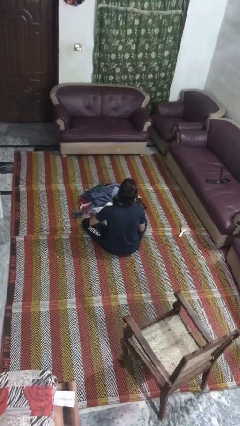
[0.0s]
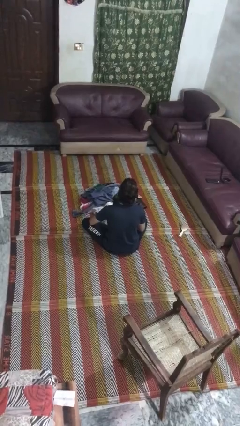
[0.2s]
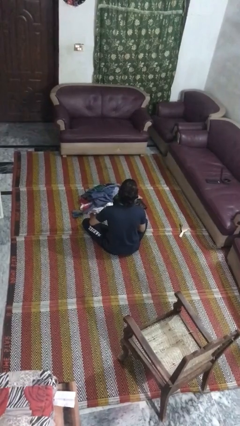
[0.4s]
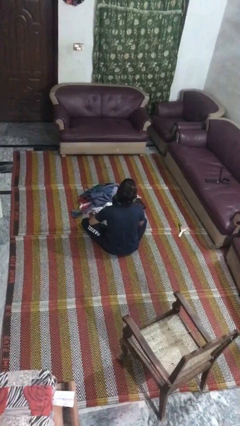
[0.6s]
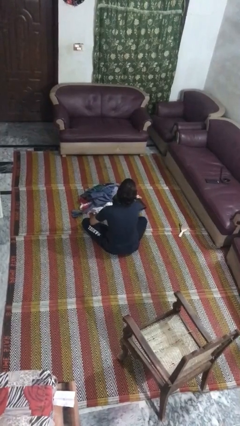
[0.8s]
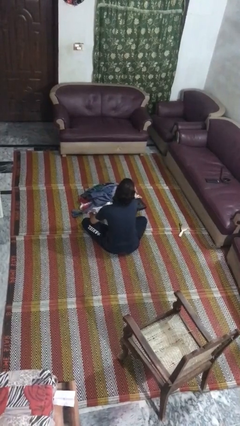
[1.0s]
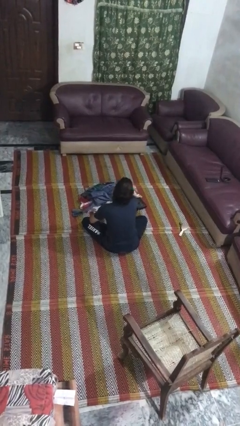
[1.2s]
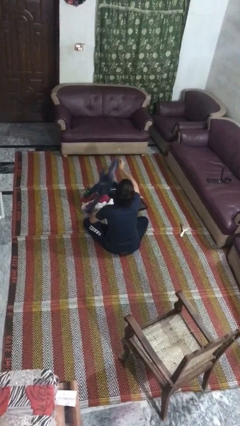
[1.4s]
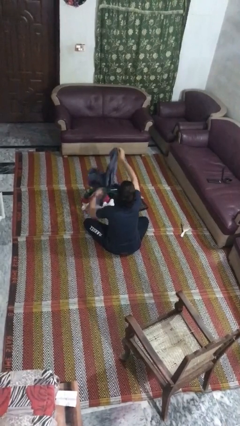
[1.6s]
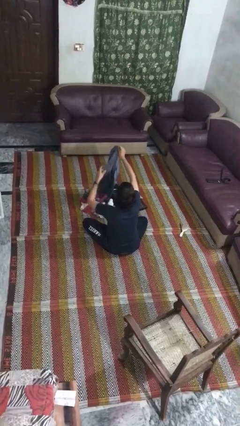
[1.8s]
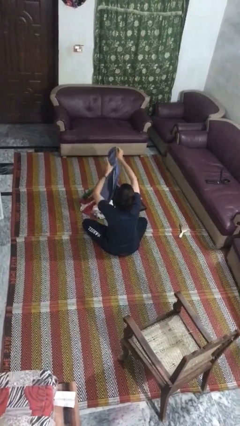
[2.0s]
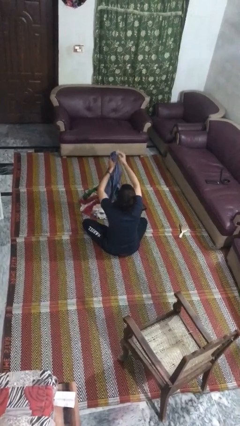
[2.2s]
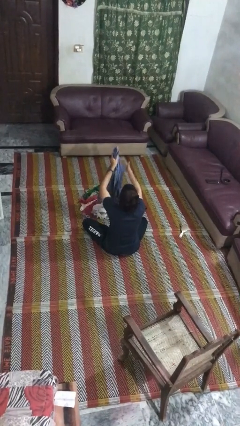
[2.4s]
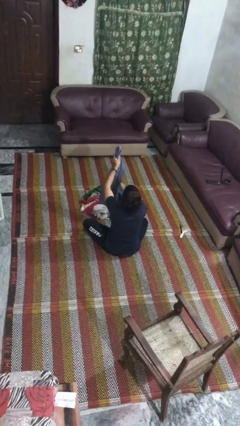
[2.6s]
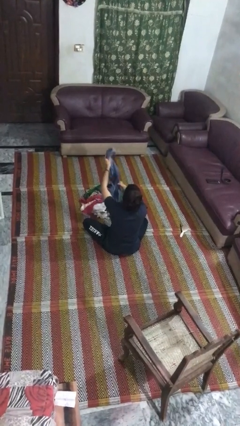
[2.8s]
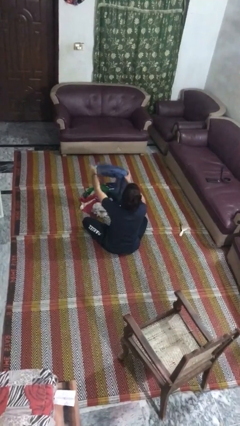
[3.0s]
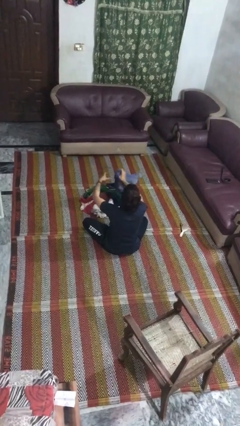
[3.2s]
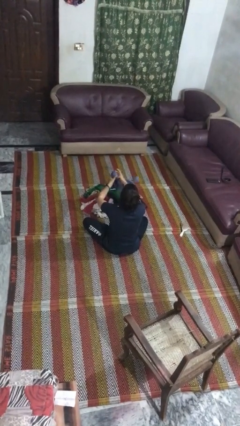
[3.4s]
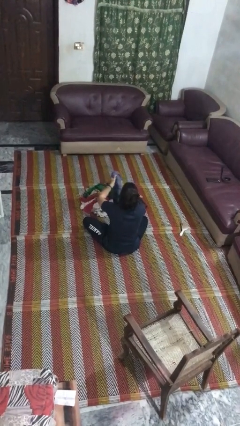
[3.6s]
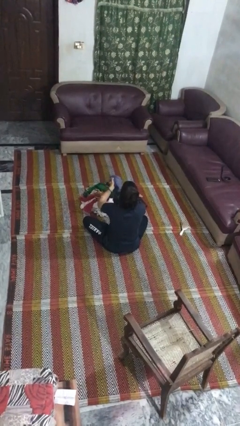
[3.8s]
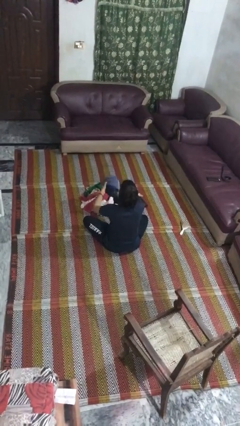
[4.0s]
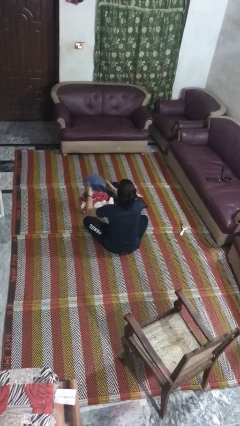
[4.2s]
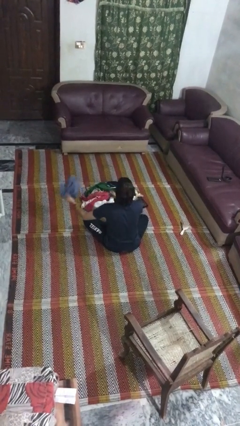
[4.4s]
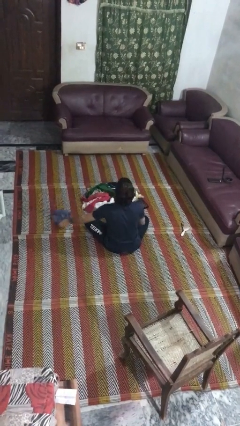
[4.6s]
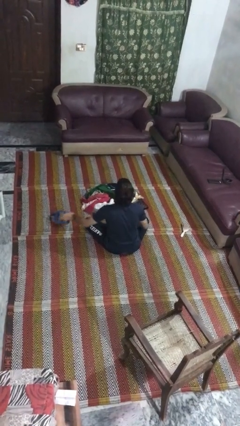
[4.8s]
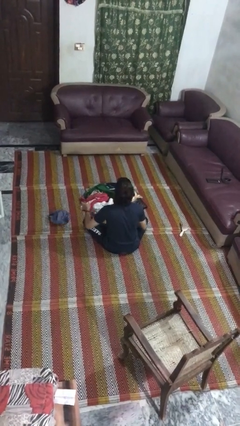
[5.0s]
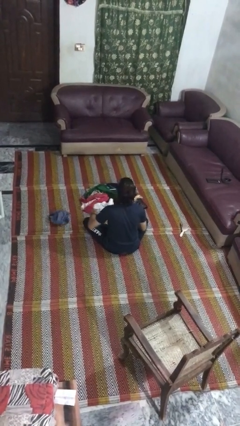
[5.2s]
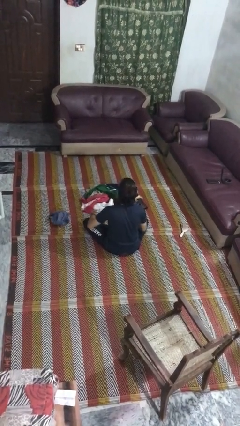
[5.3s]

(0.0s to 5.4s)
person folds shirt

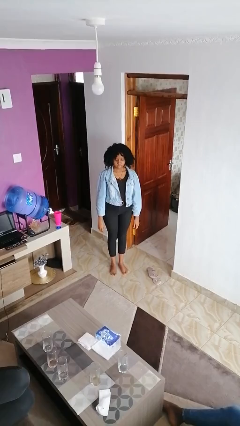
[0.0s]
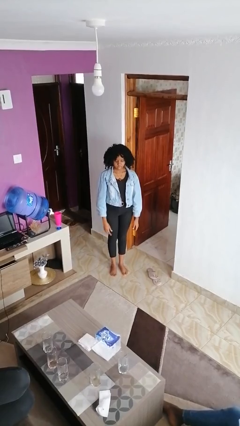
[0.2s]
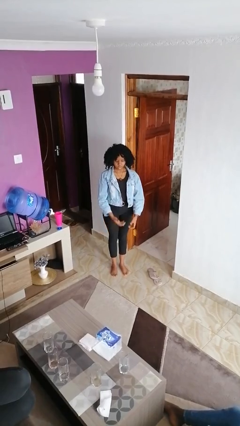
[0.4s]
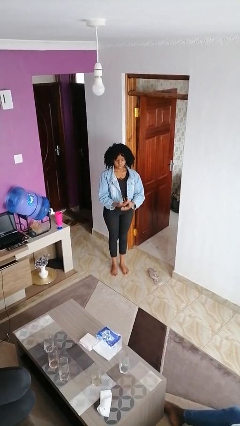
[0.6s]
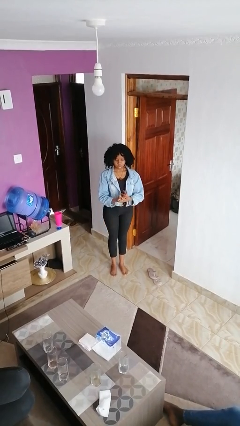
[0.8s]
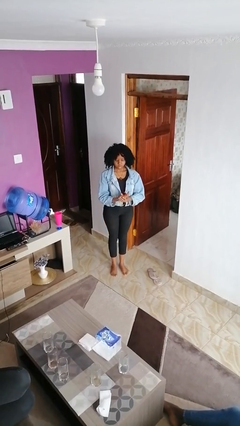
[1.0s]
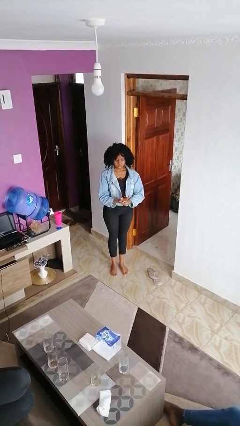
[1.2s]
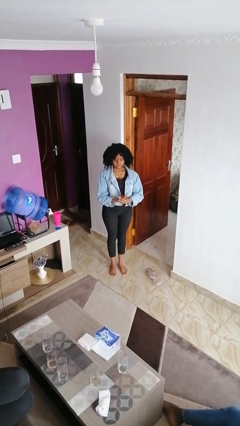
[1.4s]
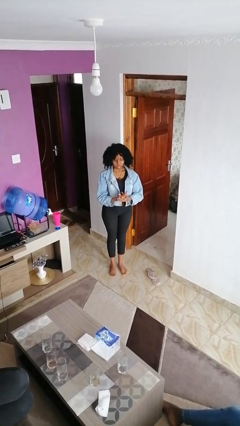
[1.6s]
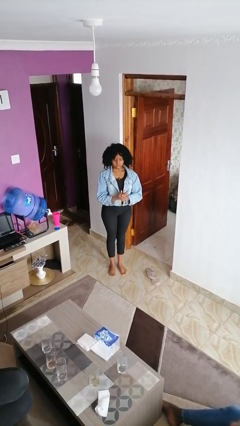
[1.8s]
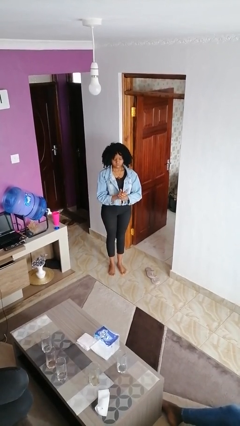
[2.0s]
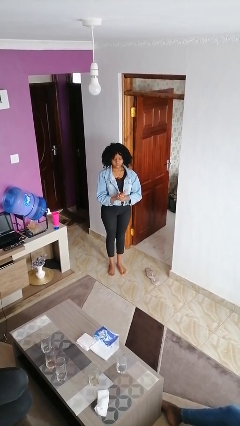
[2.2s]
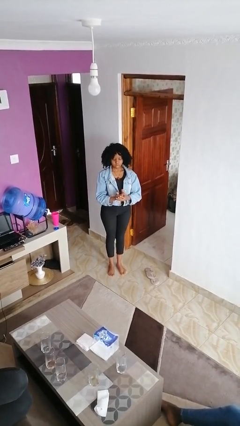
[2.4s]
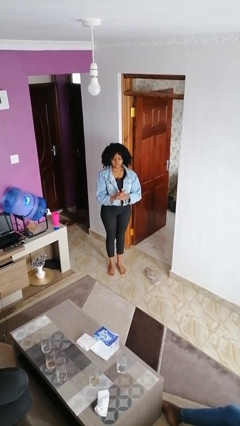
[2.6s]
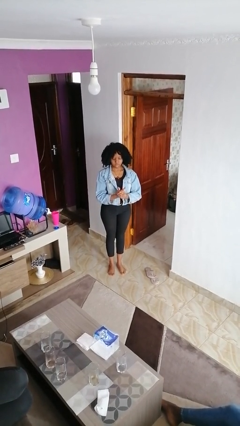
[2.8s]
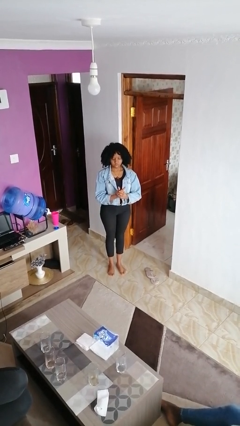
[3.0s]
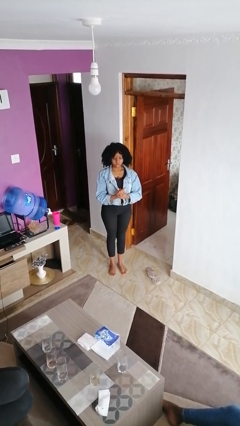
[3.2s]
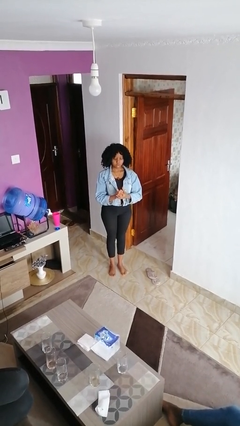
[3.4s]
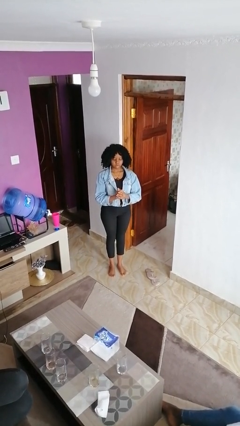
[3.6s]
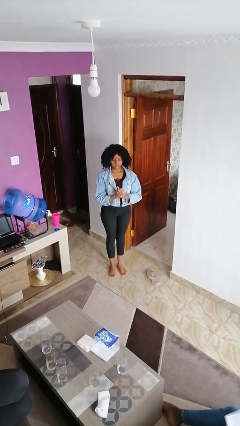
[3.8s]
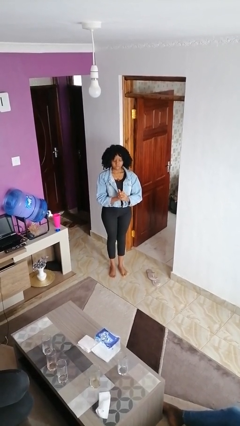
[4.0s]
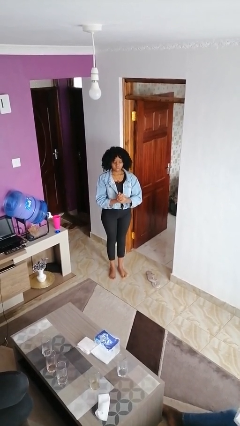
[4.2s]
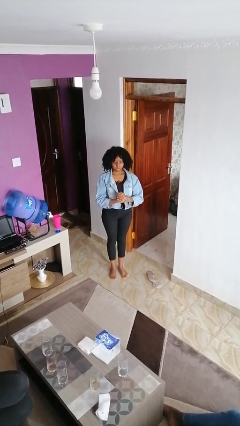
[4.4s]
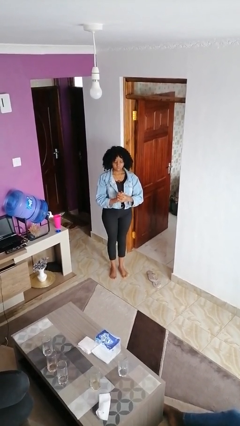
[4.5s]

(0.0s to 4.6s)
person cracks knuckles

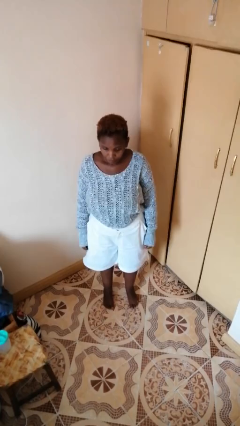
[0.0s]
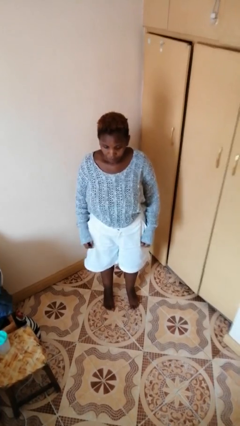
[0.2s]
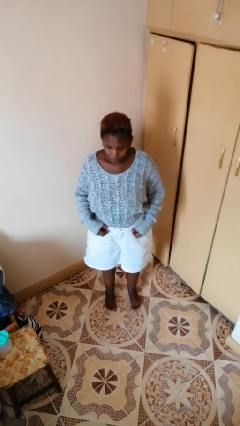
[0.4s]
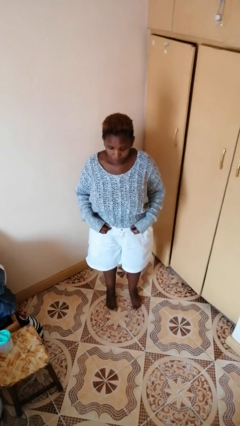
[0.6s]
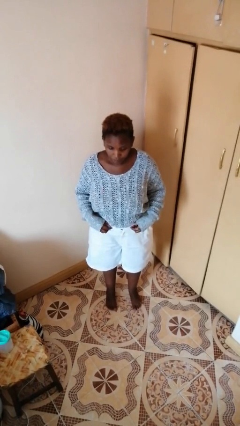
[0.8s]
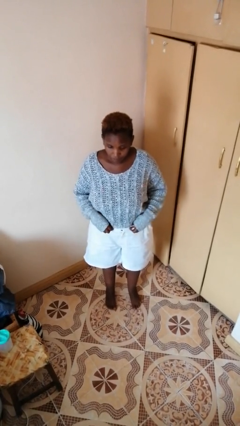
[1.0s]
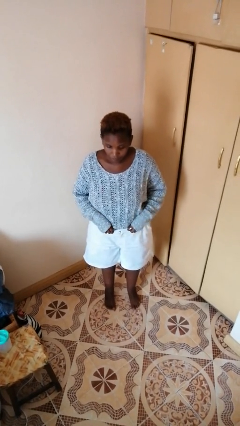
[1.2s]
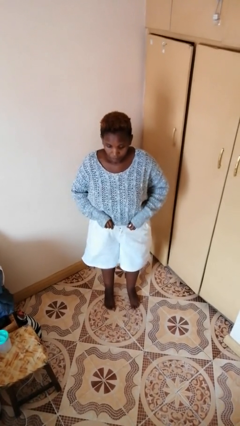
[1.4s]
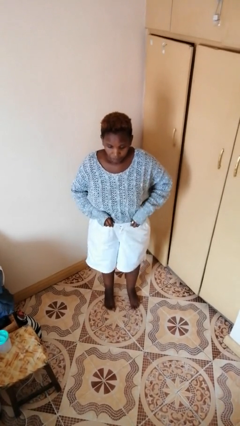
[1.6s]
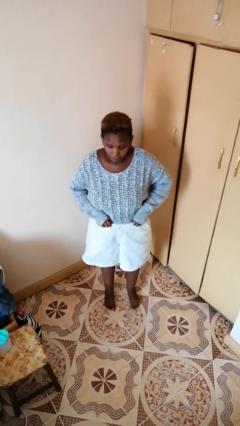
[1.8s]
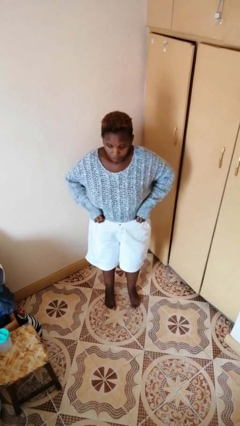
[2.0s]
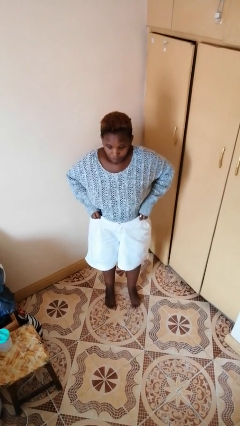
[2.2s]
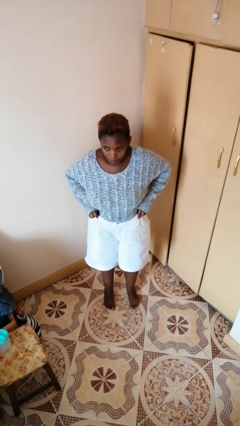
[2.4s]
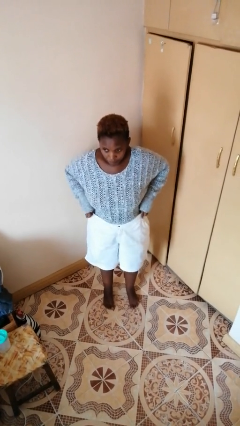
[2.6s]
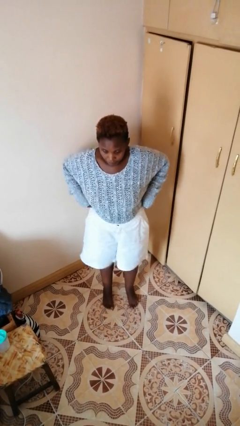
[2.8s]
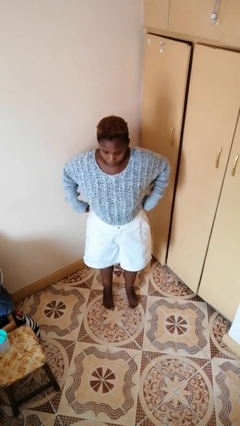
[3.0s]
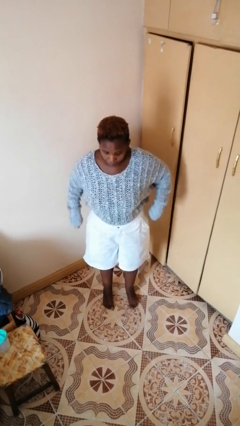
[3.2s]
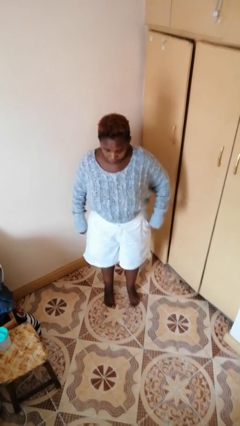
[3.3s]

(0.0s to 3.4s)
person hikes up pants

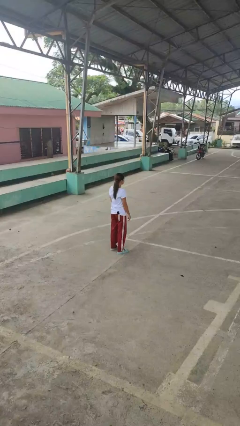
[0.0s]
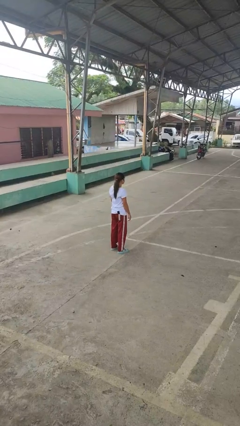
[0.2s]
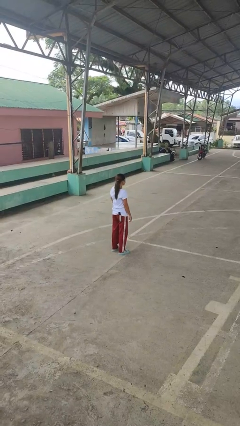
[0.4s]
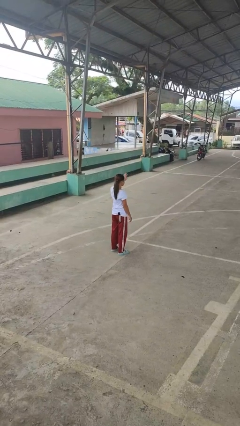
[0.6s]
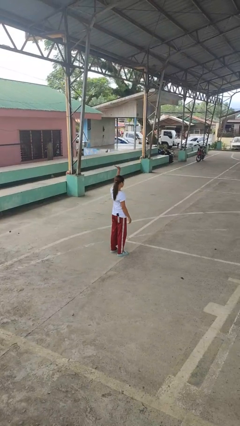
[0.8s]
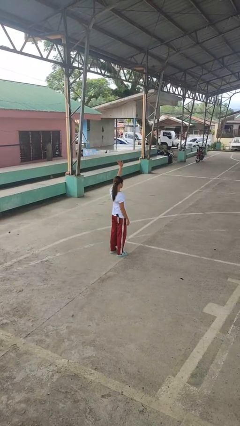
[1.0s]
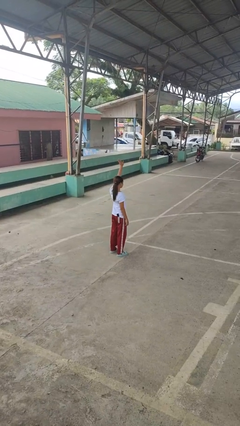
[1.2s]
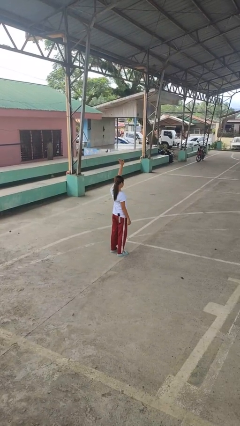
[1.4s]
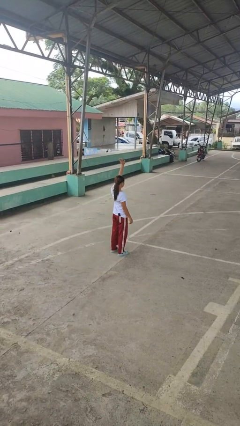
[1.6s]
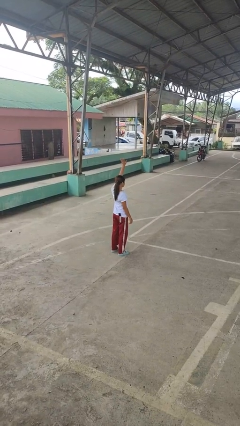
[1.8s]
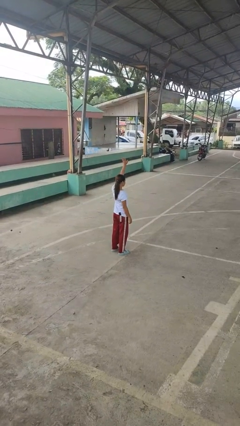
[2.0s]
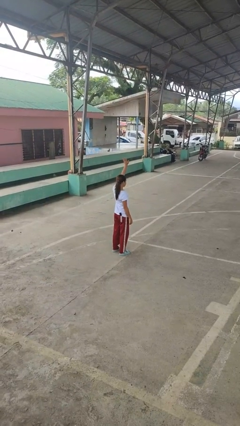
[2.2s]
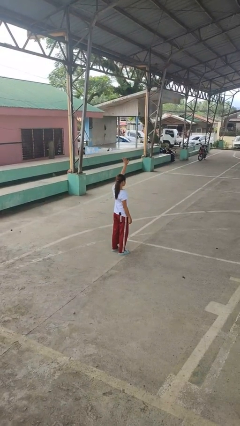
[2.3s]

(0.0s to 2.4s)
person gestures raise hand

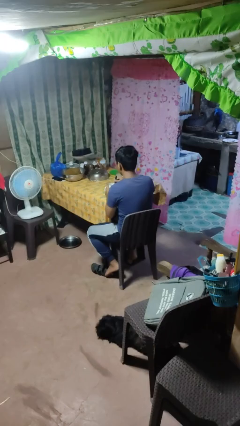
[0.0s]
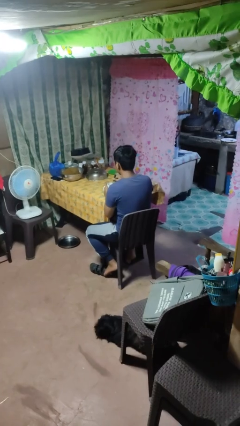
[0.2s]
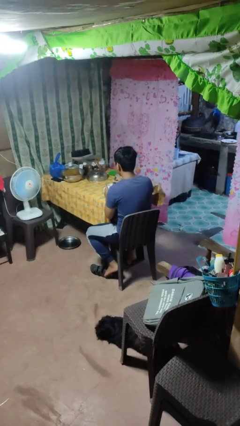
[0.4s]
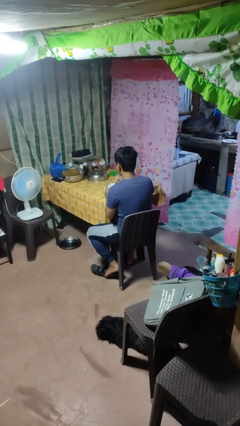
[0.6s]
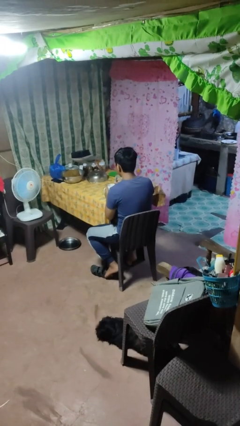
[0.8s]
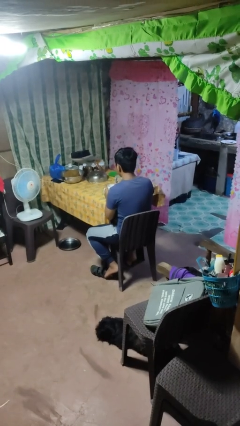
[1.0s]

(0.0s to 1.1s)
person stirs mug

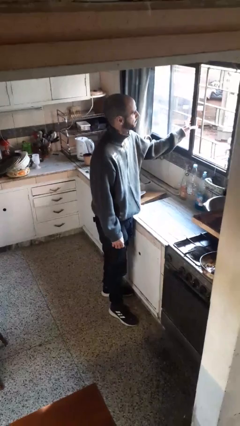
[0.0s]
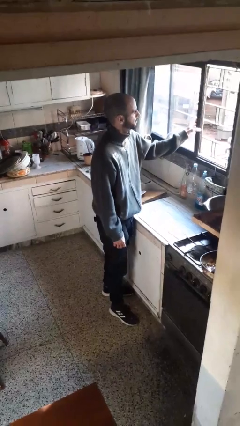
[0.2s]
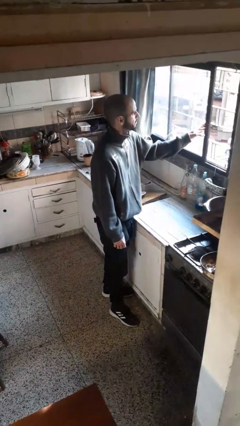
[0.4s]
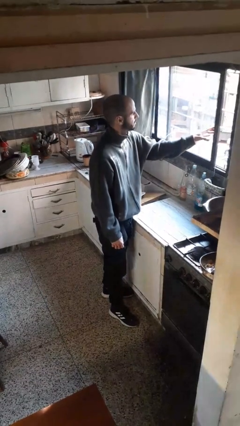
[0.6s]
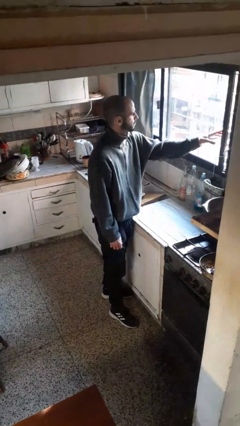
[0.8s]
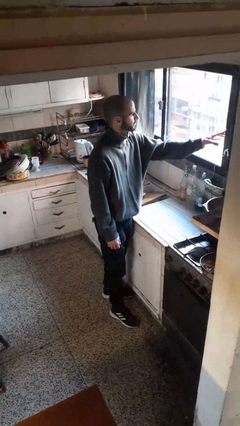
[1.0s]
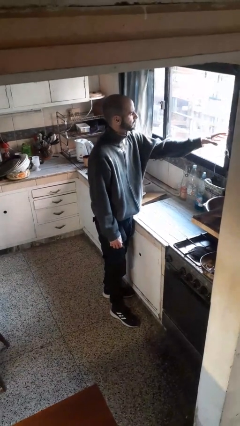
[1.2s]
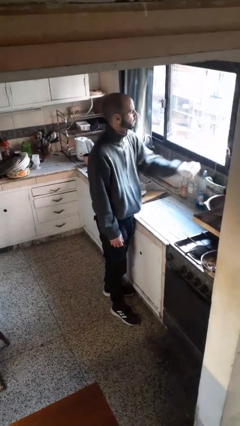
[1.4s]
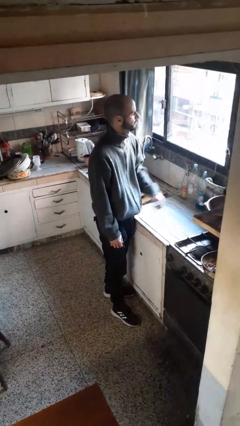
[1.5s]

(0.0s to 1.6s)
person closes home window
